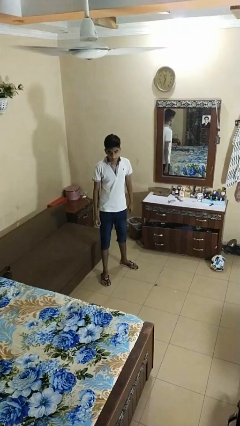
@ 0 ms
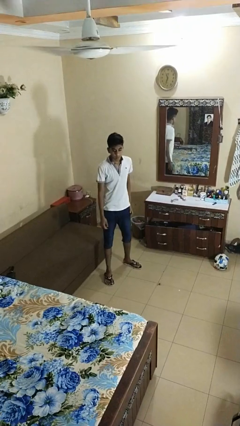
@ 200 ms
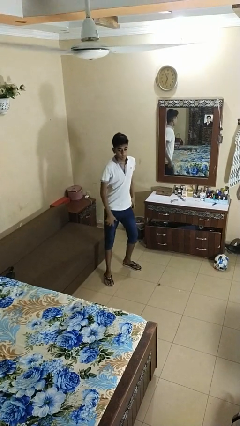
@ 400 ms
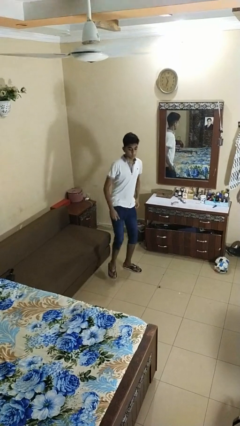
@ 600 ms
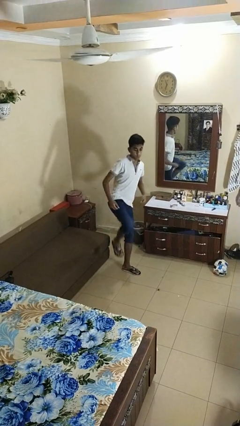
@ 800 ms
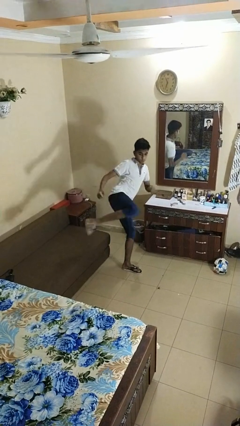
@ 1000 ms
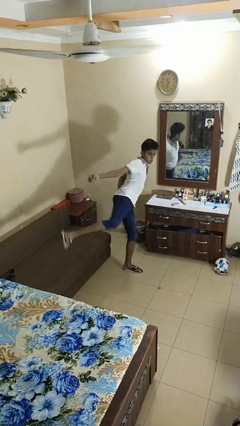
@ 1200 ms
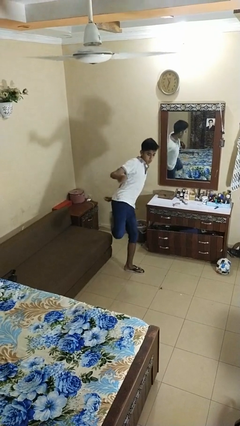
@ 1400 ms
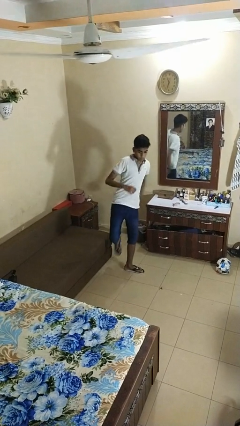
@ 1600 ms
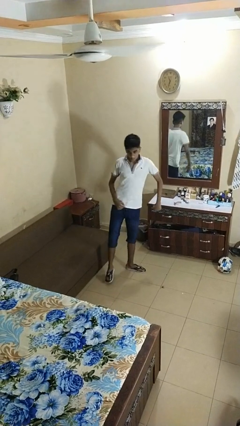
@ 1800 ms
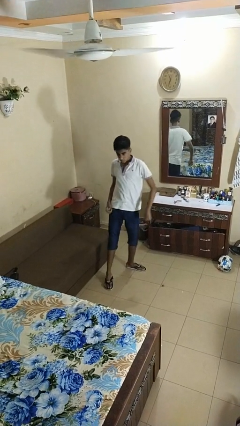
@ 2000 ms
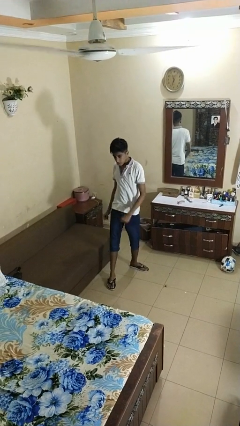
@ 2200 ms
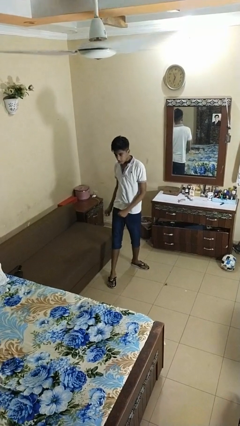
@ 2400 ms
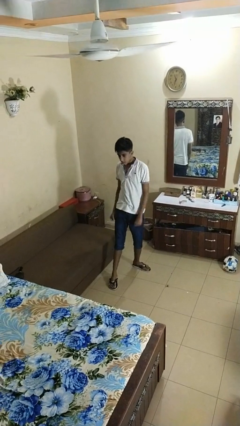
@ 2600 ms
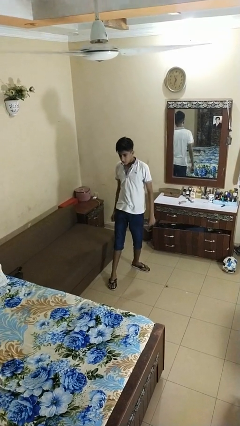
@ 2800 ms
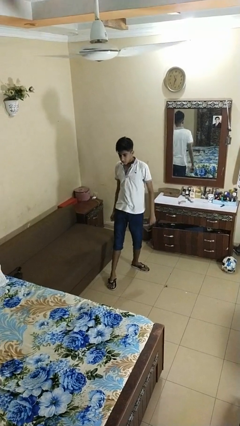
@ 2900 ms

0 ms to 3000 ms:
person karate kicks

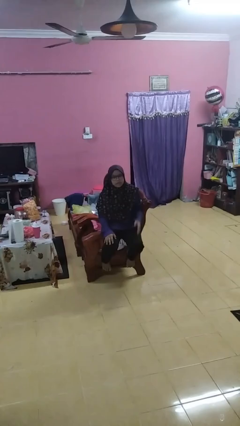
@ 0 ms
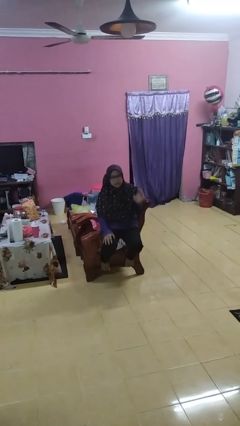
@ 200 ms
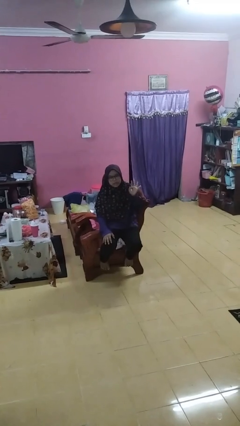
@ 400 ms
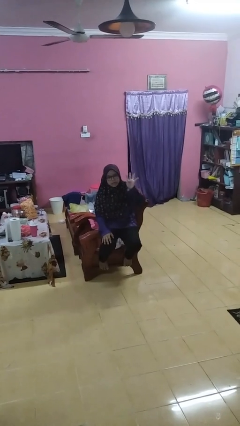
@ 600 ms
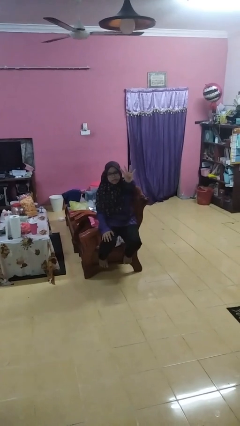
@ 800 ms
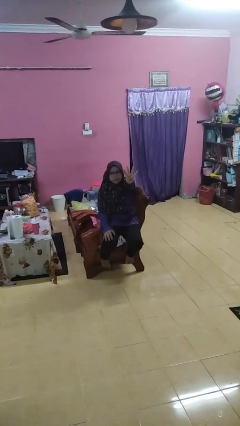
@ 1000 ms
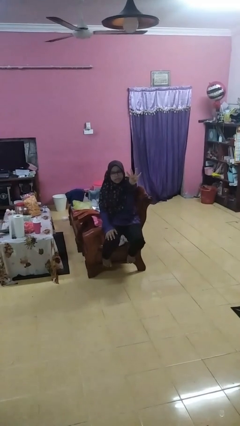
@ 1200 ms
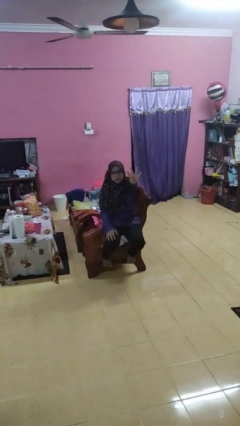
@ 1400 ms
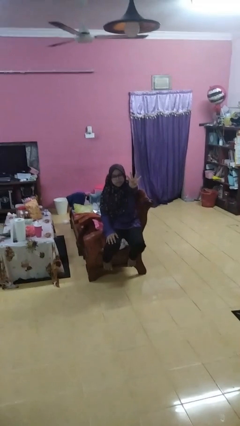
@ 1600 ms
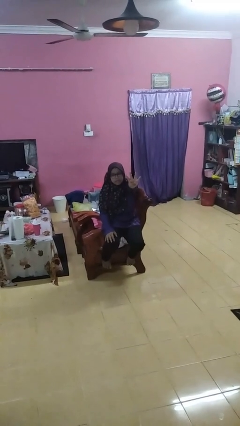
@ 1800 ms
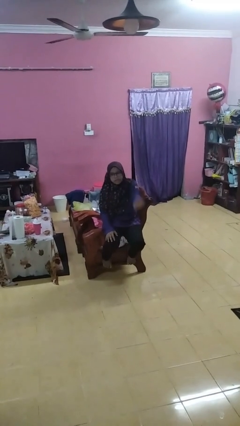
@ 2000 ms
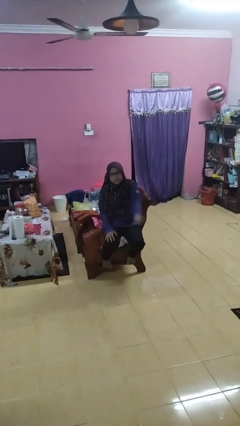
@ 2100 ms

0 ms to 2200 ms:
person gestures number four

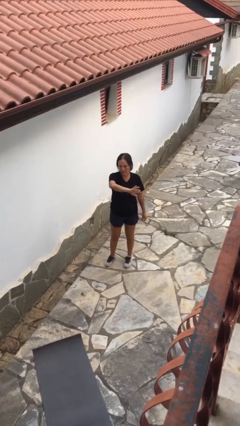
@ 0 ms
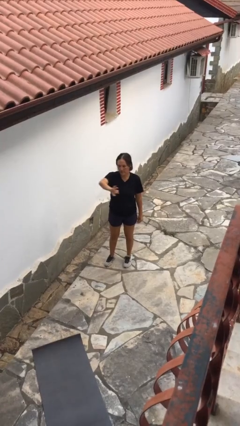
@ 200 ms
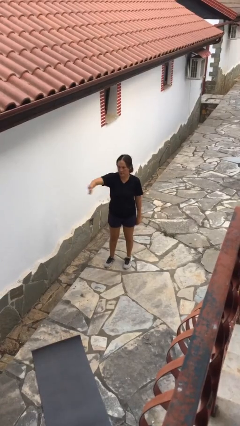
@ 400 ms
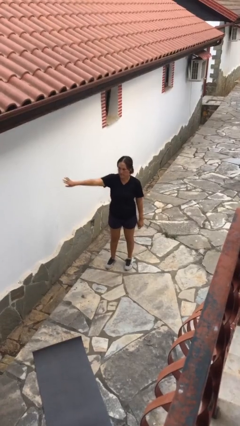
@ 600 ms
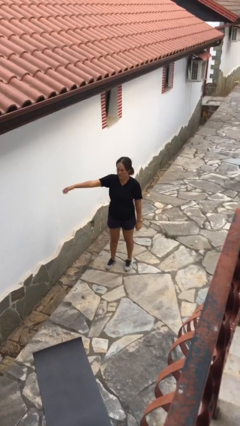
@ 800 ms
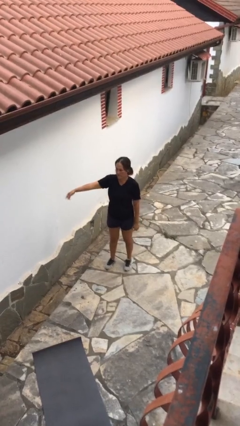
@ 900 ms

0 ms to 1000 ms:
person gestures swipe left

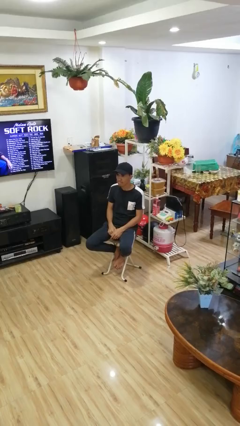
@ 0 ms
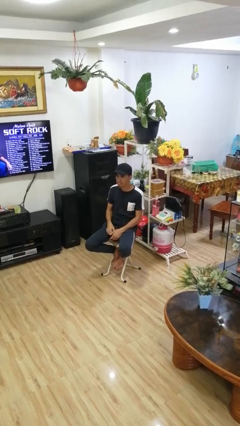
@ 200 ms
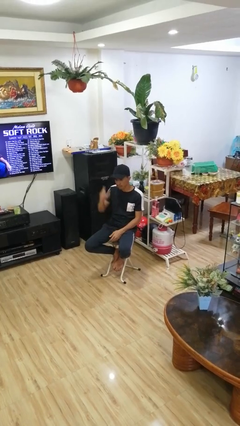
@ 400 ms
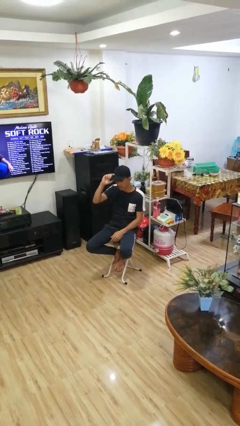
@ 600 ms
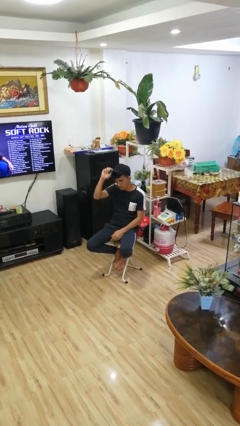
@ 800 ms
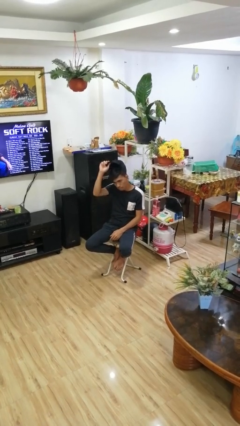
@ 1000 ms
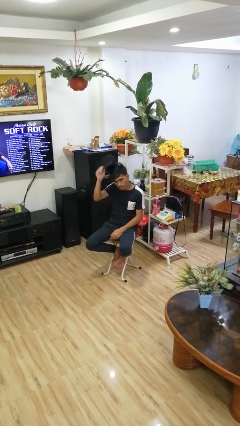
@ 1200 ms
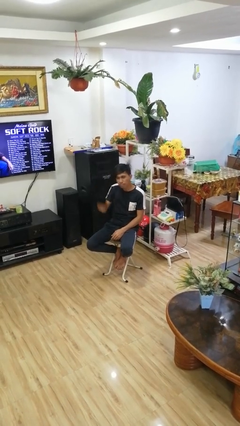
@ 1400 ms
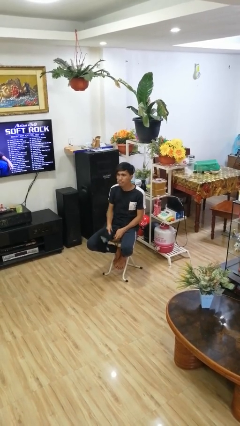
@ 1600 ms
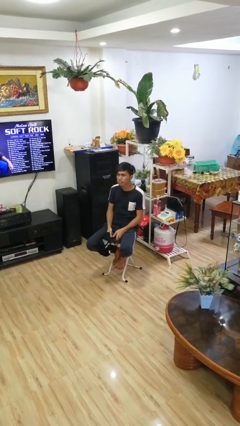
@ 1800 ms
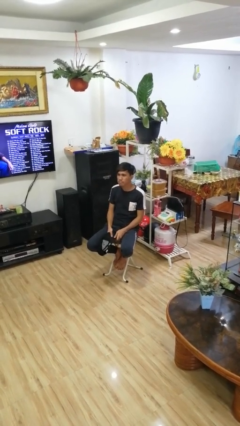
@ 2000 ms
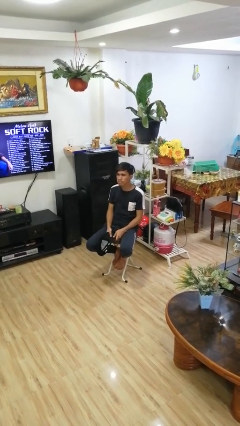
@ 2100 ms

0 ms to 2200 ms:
person takes off hat

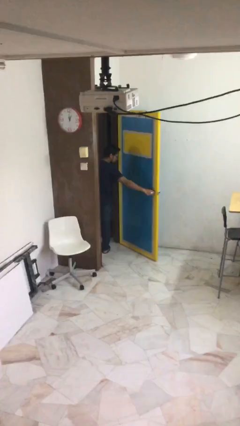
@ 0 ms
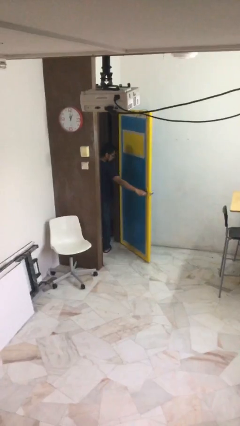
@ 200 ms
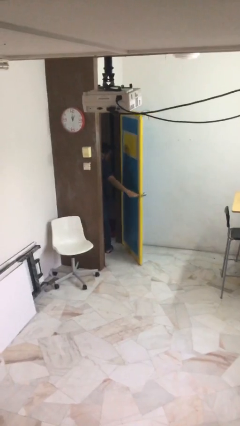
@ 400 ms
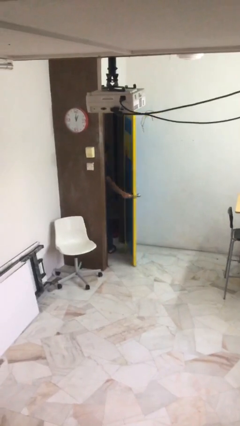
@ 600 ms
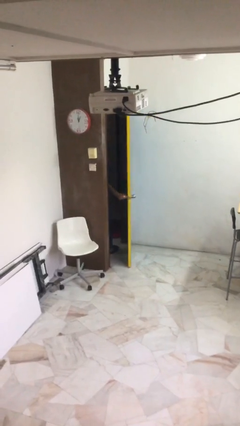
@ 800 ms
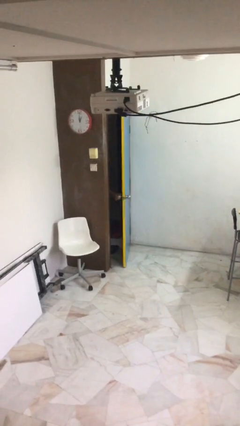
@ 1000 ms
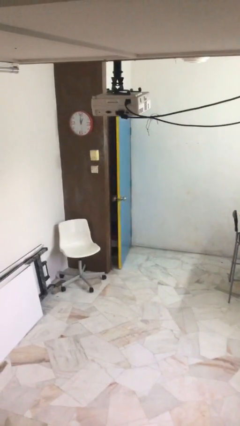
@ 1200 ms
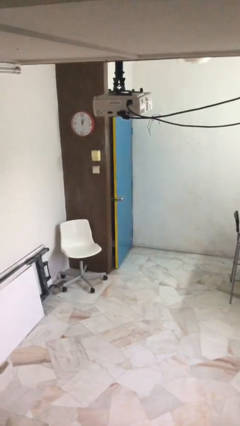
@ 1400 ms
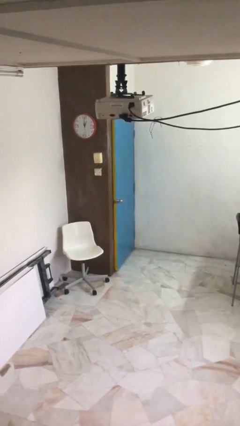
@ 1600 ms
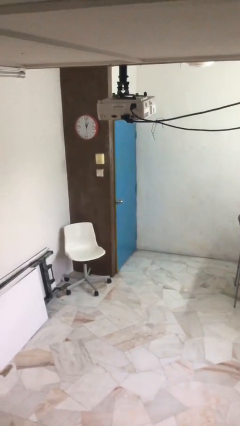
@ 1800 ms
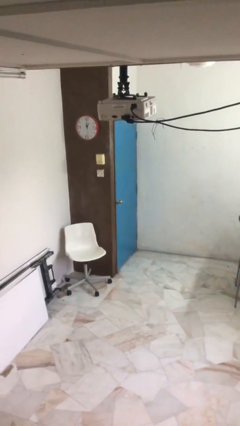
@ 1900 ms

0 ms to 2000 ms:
person closes facility door

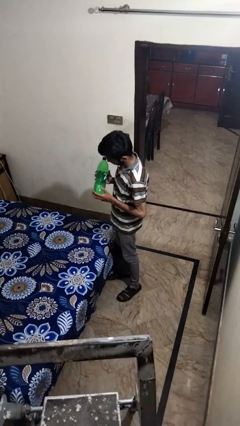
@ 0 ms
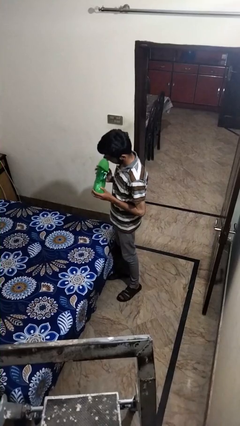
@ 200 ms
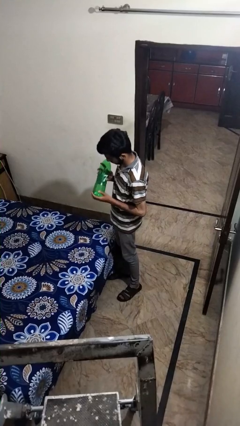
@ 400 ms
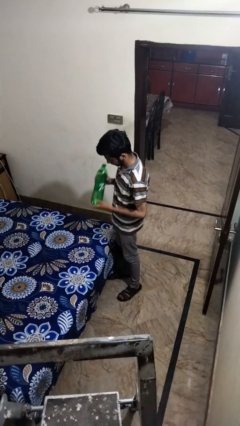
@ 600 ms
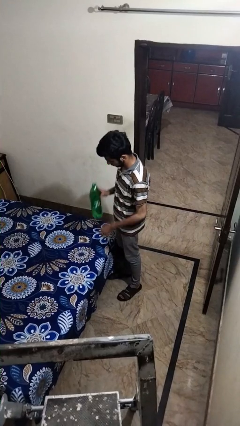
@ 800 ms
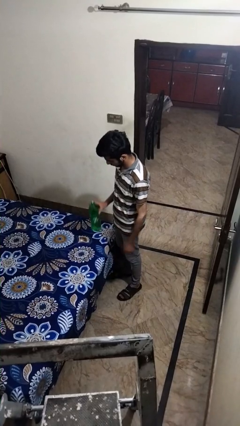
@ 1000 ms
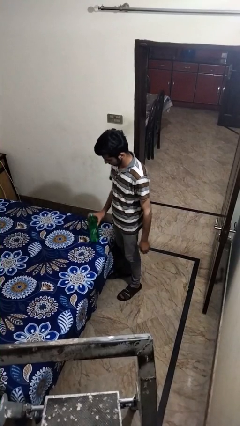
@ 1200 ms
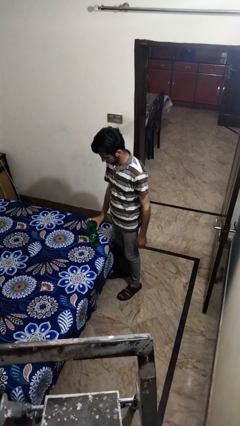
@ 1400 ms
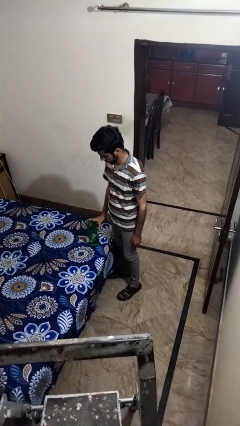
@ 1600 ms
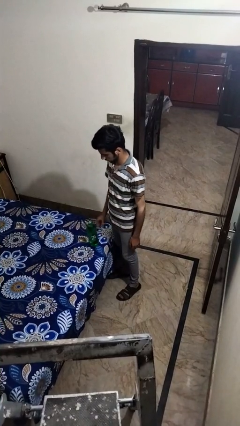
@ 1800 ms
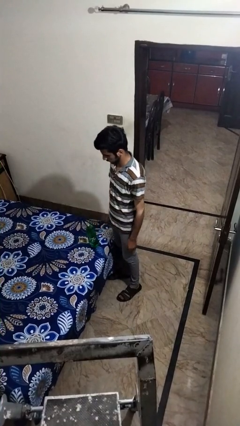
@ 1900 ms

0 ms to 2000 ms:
person puts down object on bed

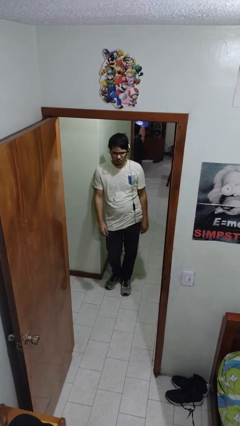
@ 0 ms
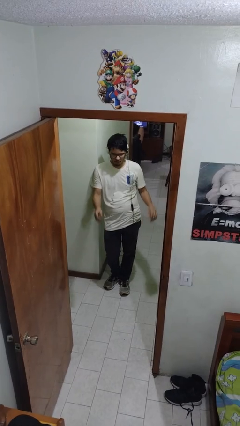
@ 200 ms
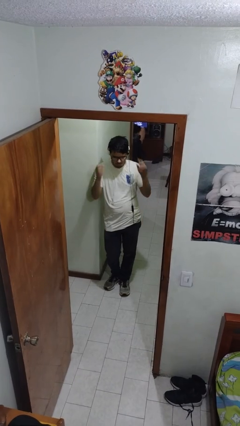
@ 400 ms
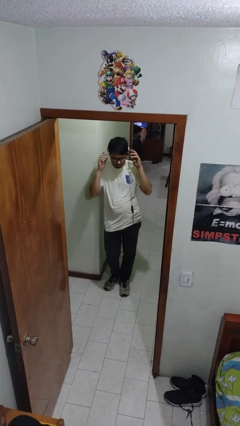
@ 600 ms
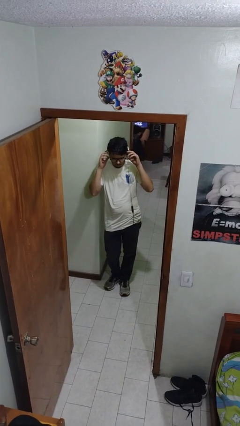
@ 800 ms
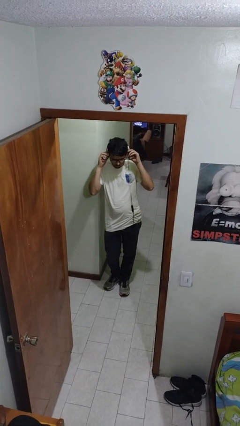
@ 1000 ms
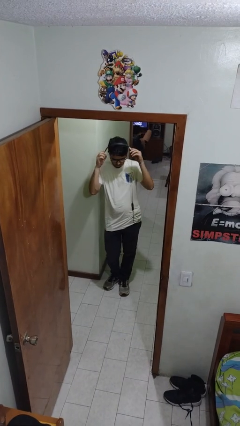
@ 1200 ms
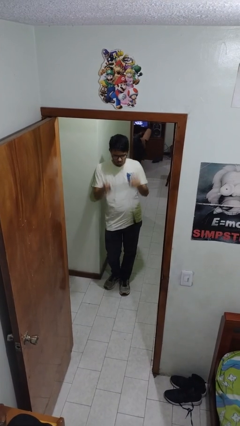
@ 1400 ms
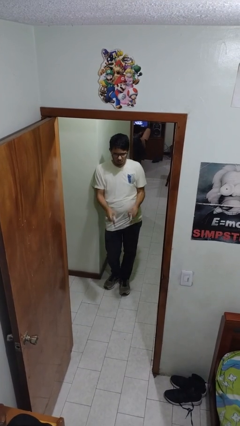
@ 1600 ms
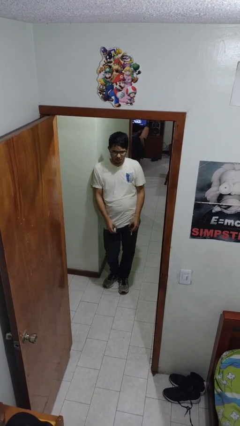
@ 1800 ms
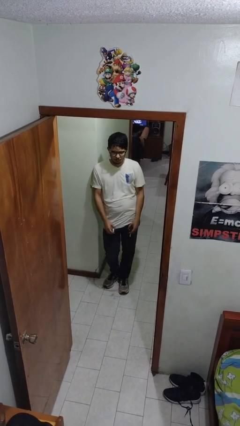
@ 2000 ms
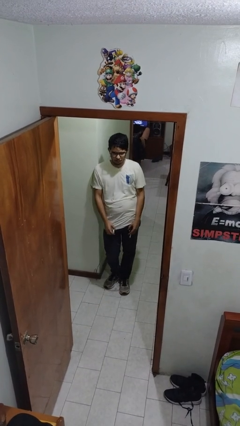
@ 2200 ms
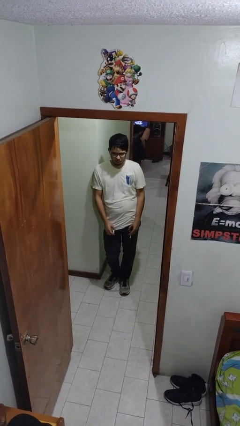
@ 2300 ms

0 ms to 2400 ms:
person takes off headphones

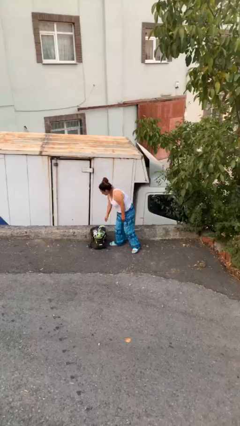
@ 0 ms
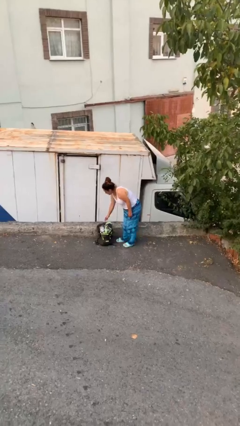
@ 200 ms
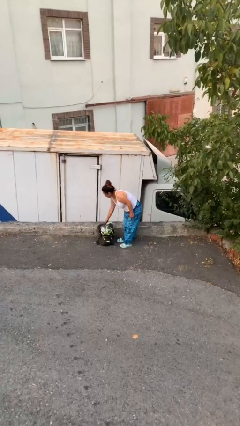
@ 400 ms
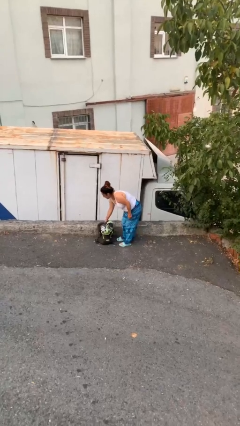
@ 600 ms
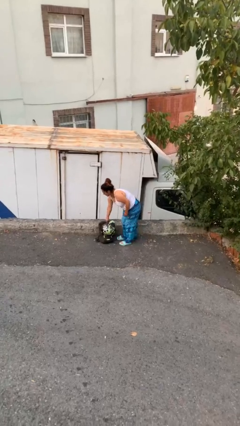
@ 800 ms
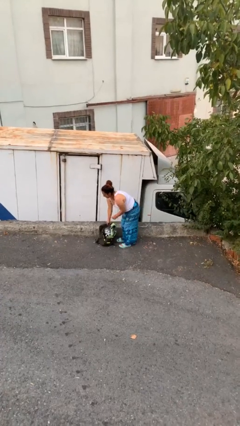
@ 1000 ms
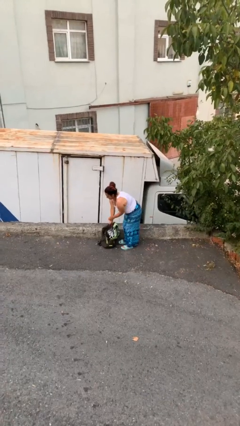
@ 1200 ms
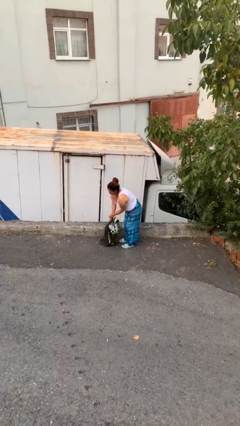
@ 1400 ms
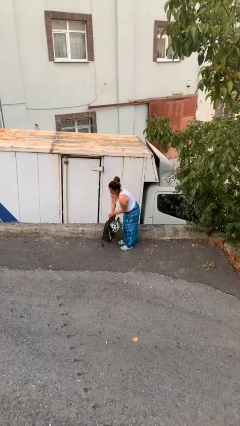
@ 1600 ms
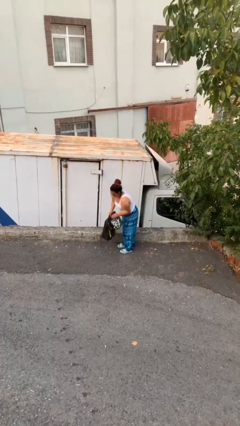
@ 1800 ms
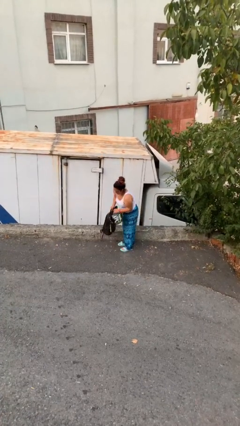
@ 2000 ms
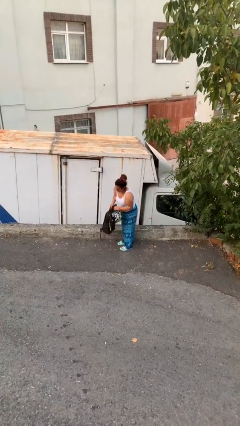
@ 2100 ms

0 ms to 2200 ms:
person picks up object from floor

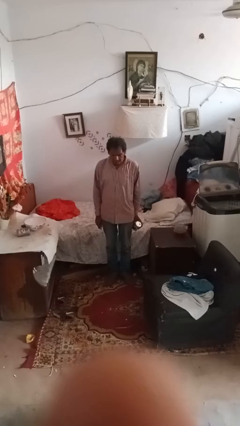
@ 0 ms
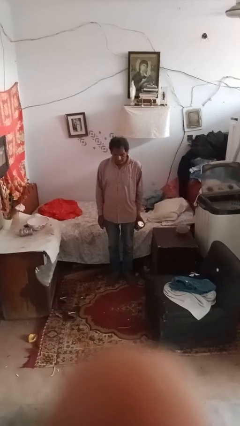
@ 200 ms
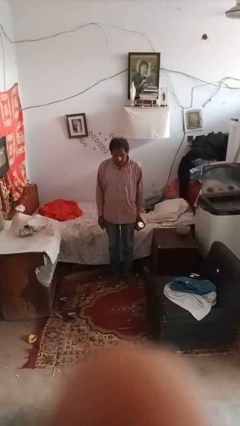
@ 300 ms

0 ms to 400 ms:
person opens can with can opener
